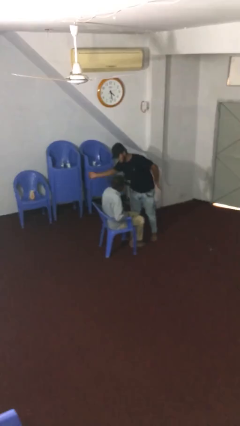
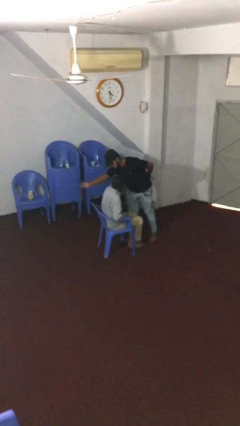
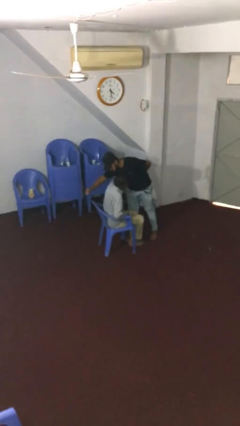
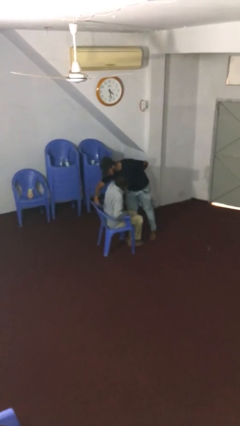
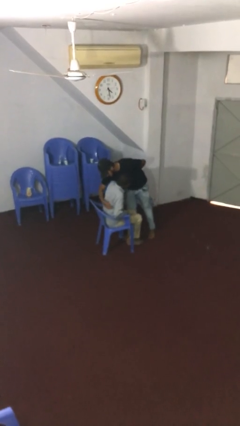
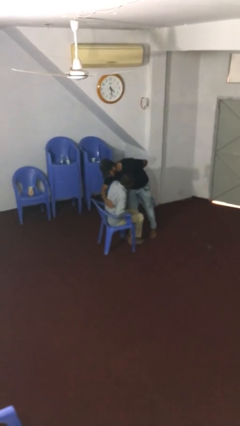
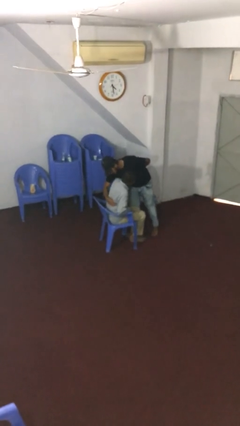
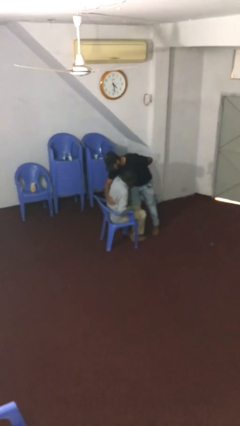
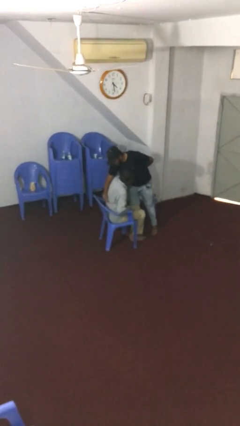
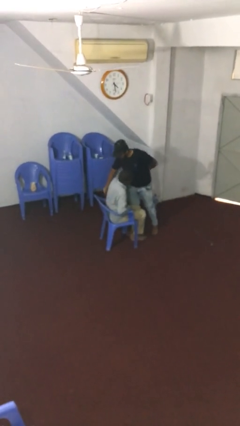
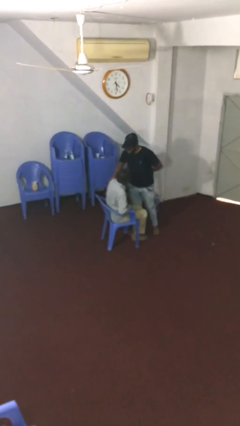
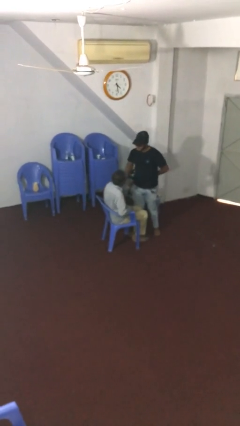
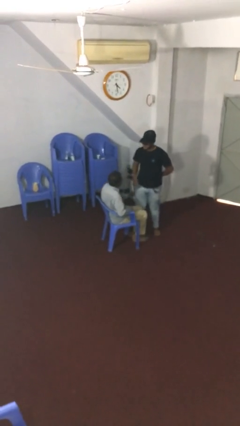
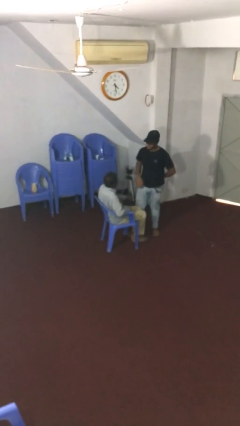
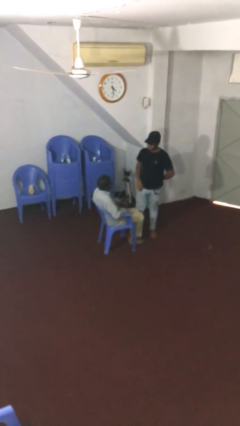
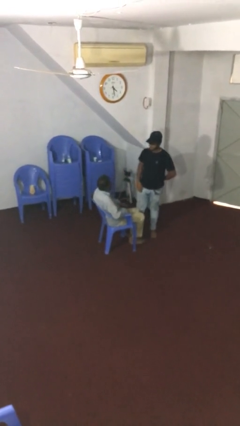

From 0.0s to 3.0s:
person embraces person

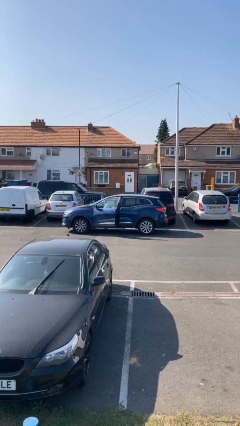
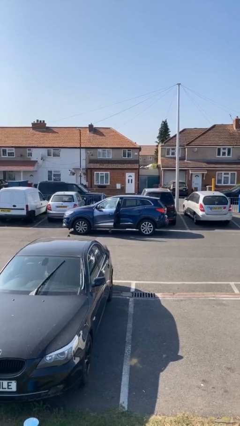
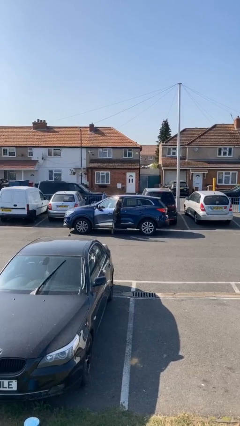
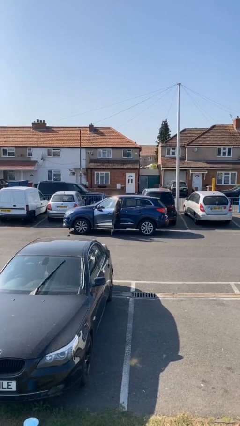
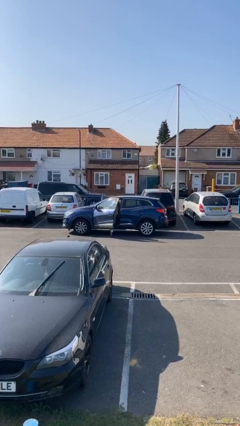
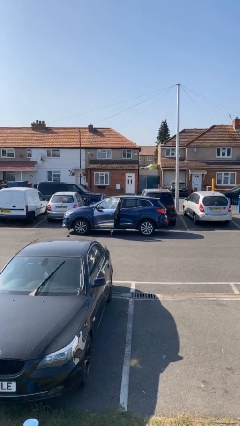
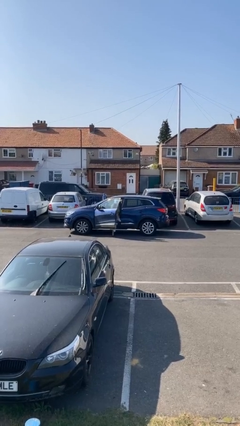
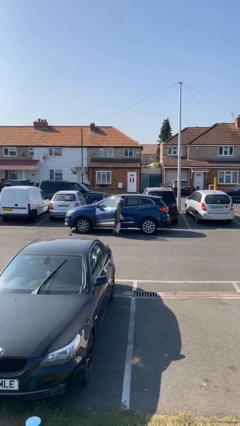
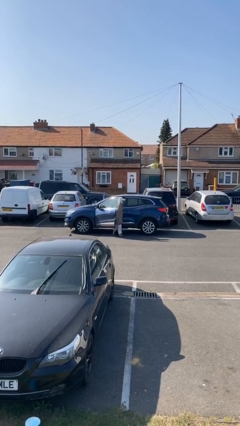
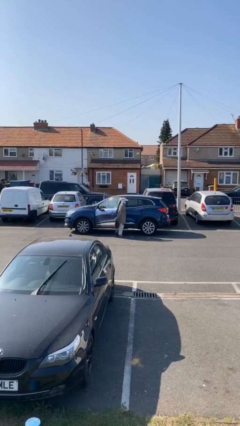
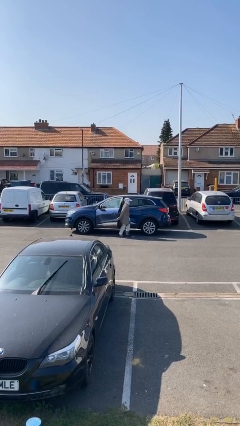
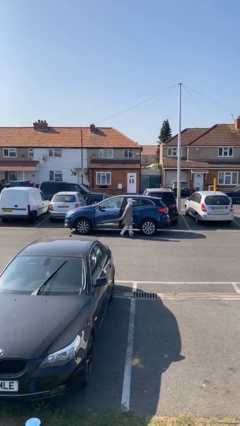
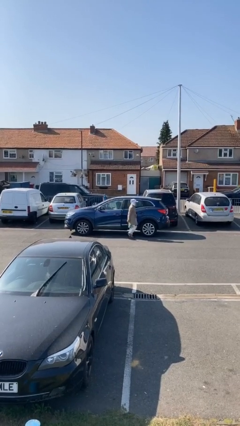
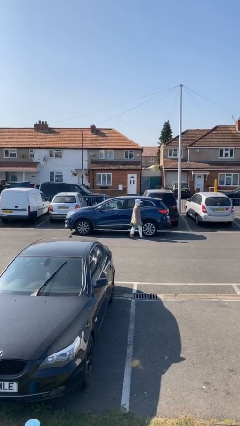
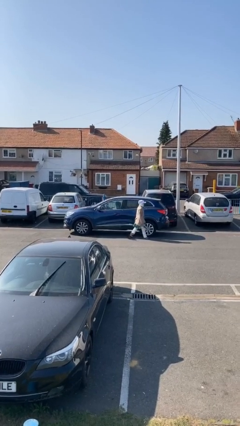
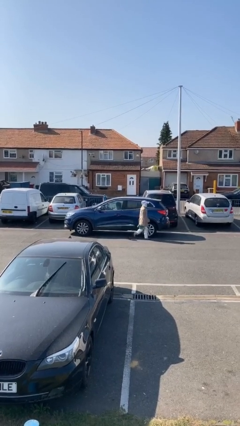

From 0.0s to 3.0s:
car drops off person

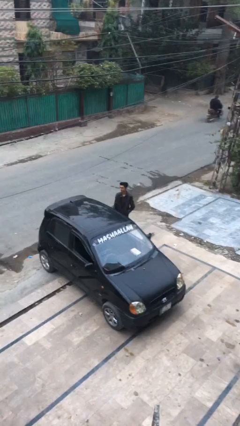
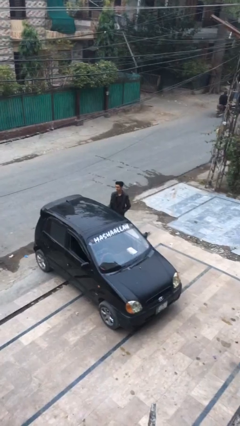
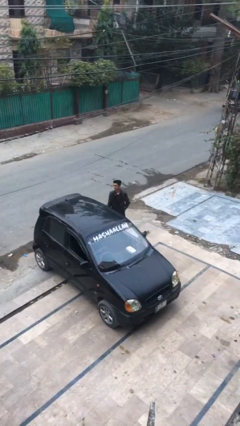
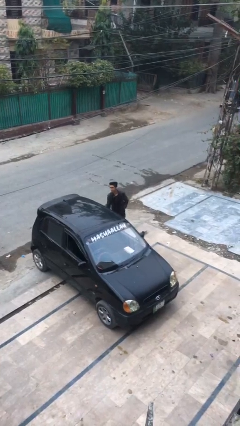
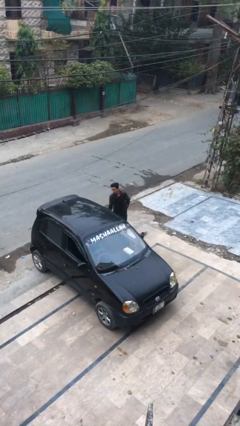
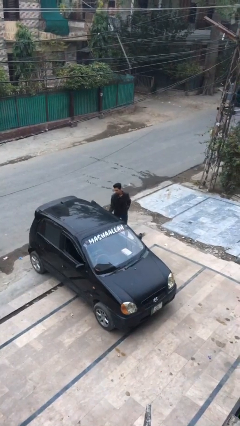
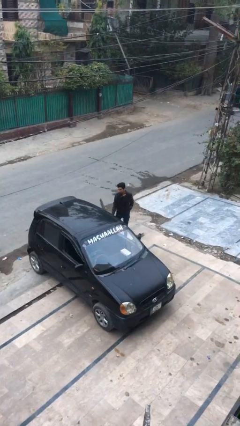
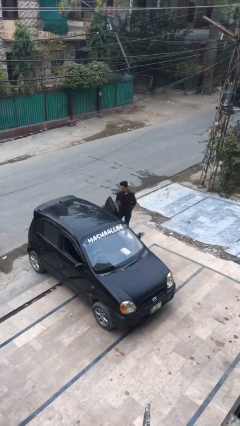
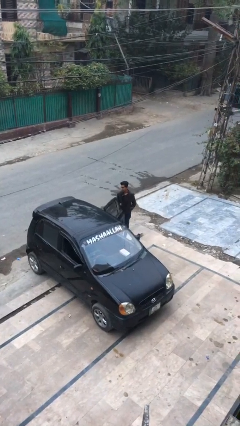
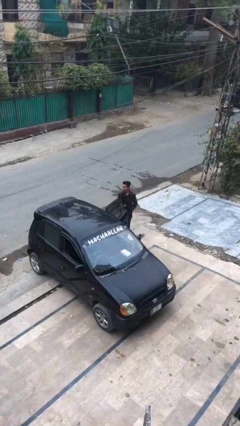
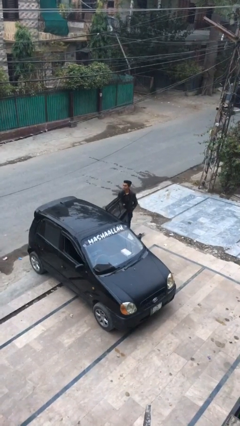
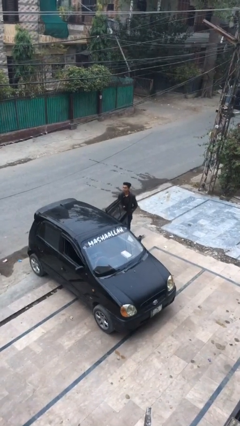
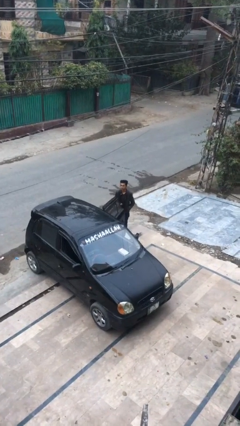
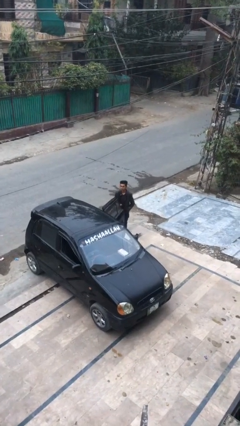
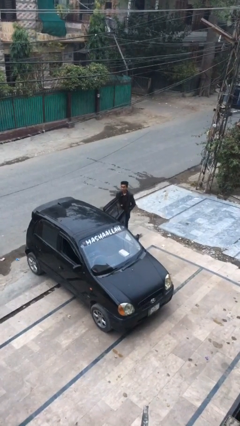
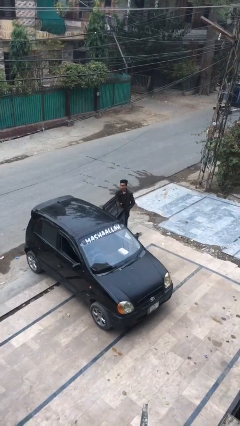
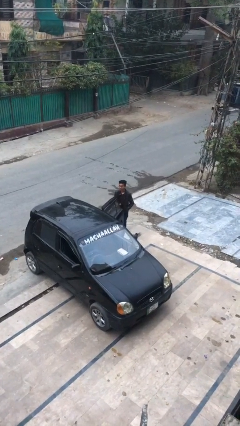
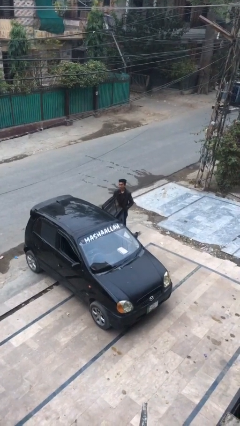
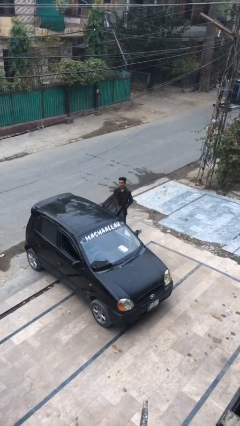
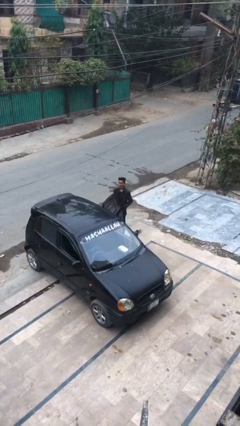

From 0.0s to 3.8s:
person opens car door

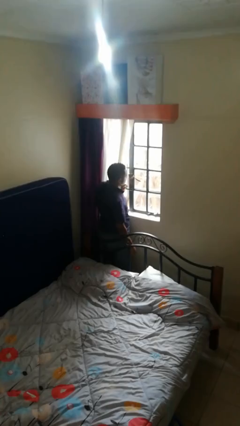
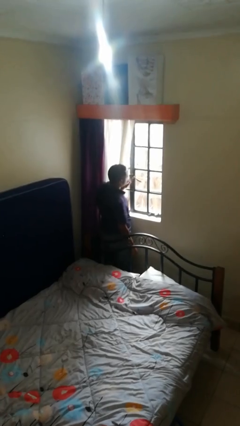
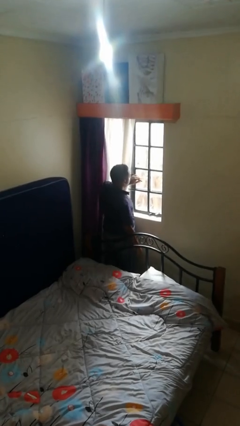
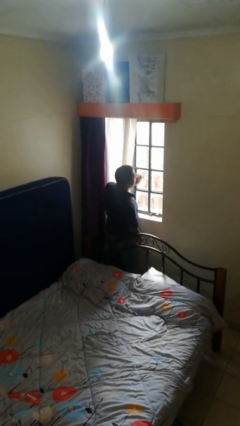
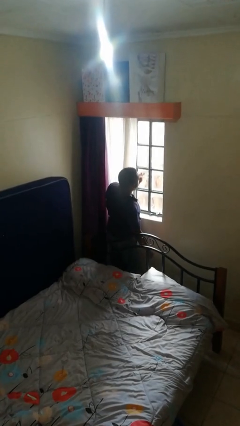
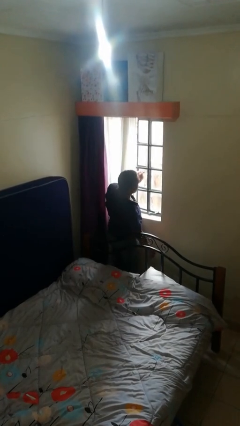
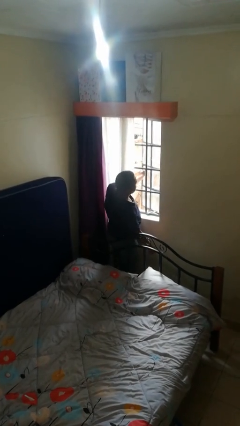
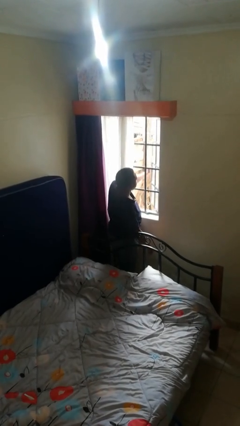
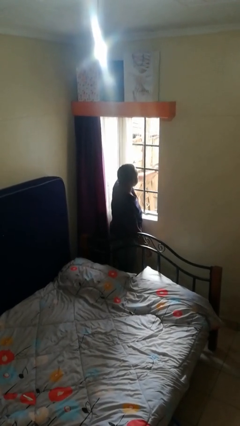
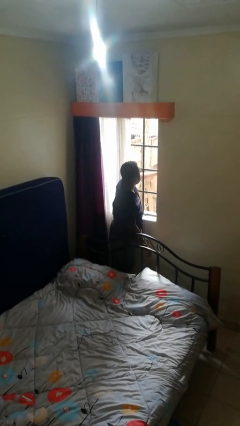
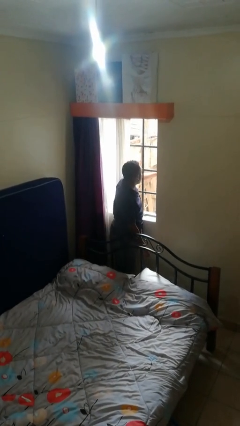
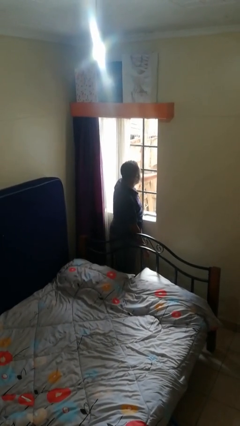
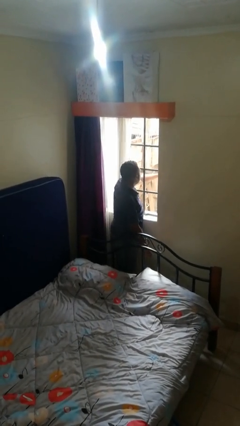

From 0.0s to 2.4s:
person opens home window

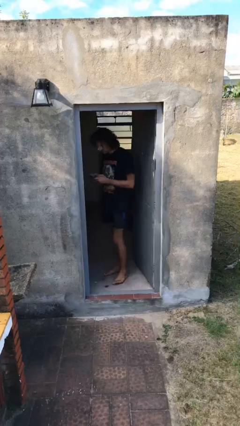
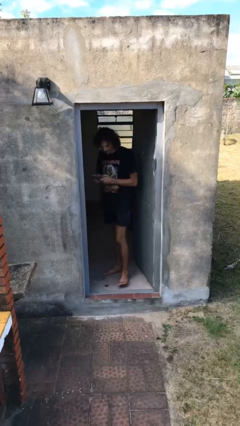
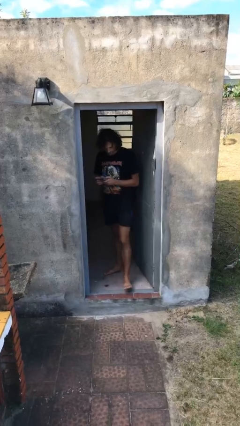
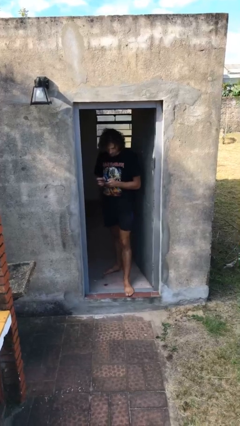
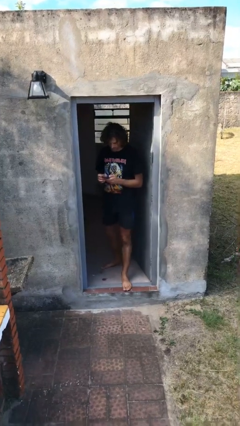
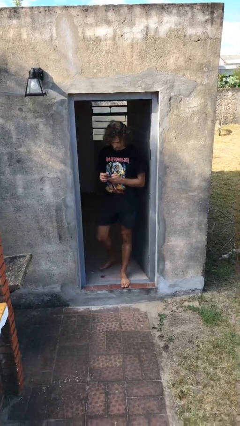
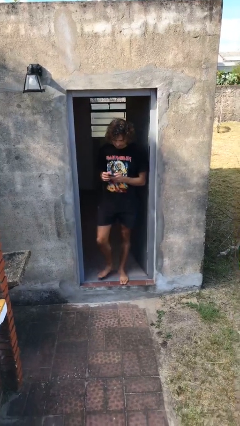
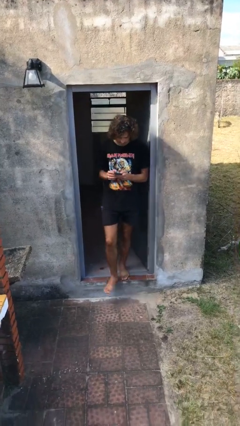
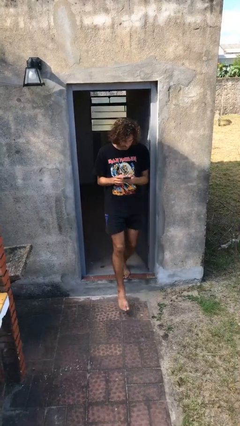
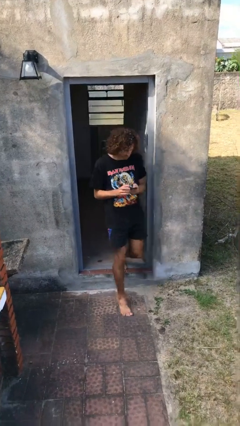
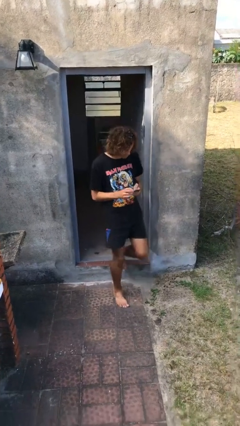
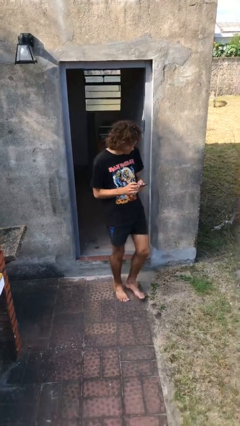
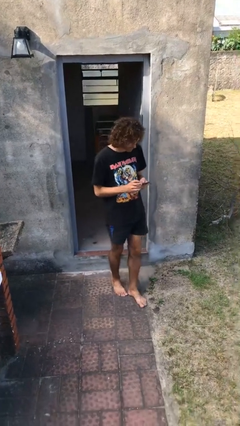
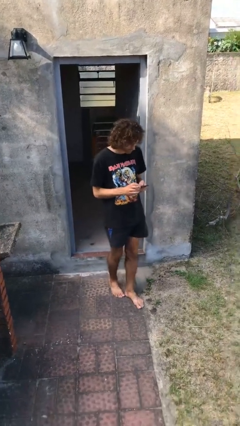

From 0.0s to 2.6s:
person enters scene through structure

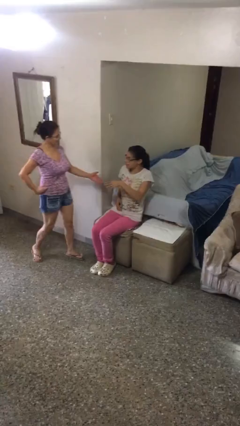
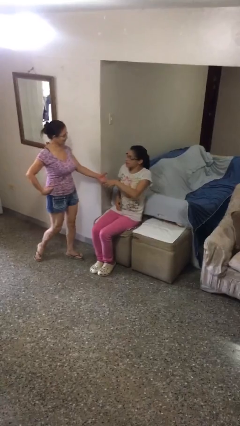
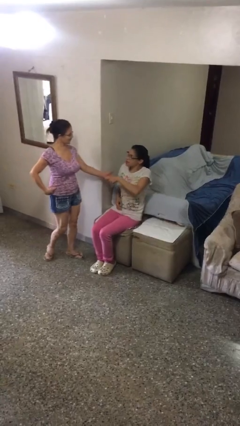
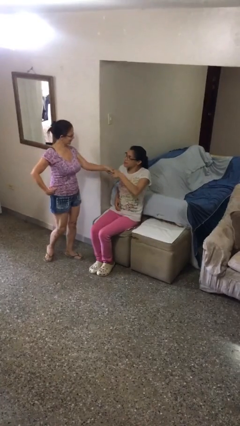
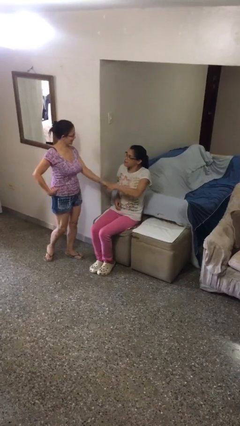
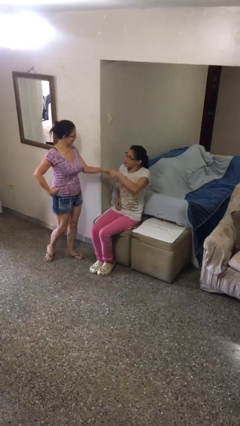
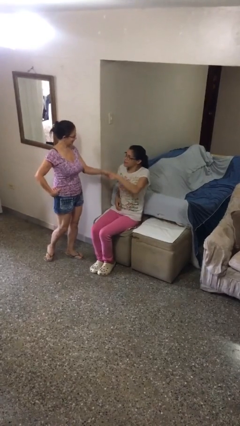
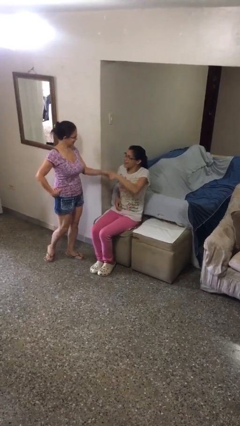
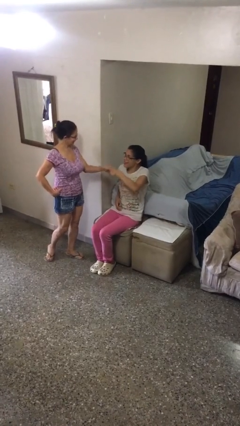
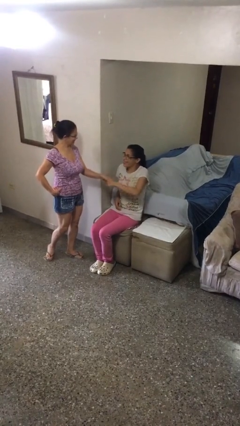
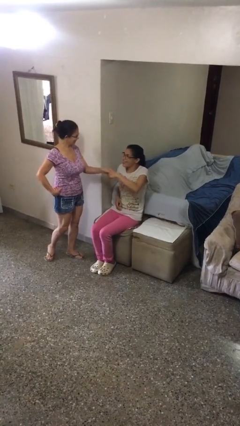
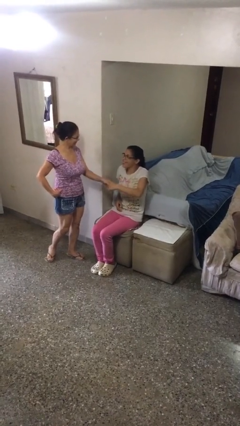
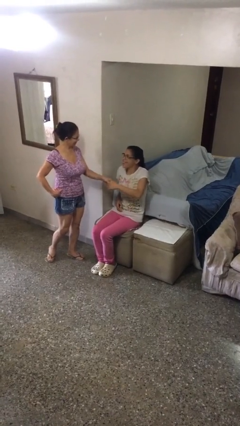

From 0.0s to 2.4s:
person shakes hand
